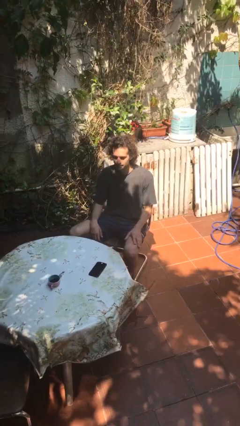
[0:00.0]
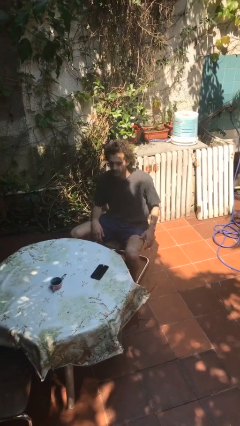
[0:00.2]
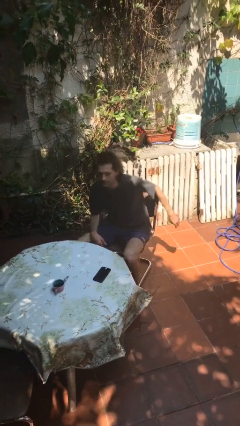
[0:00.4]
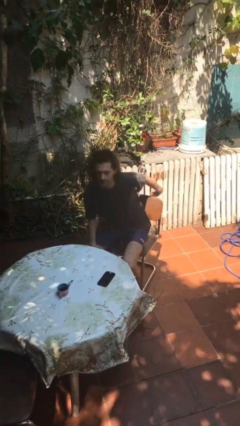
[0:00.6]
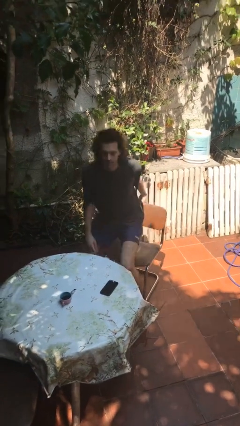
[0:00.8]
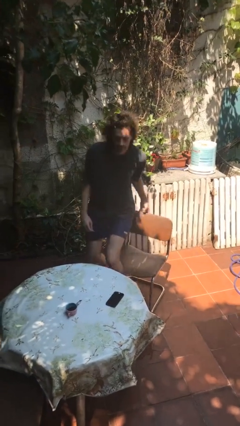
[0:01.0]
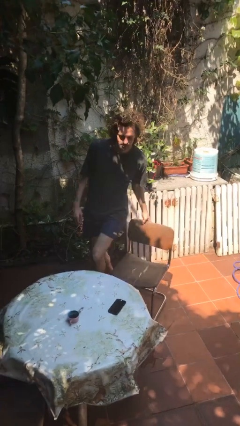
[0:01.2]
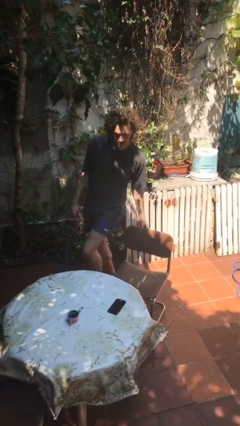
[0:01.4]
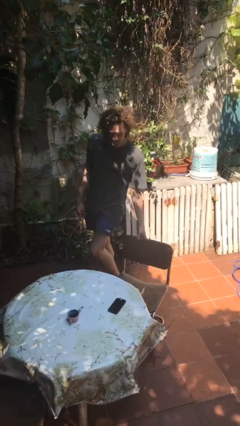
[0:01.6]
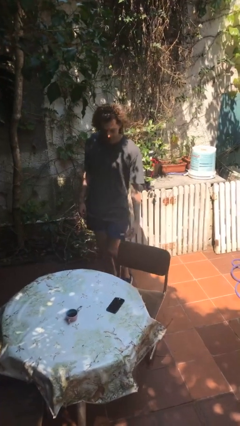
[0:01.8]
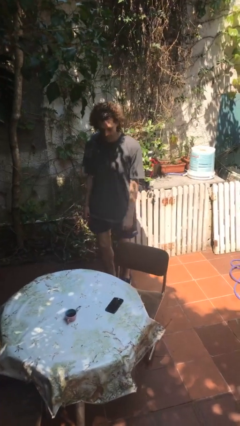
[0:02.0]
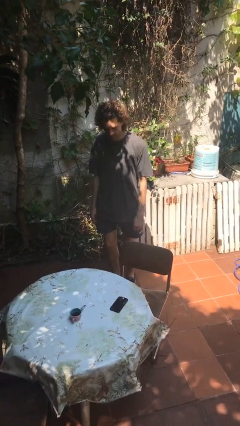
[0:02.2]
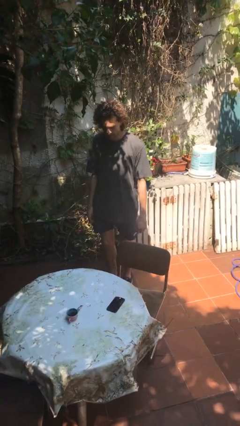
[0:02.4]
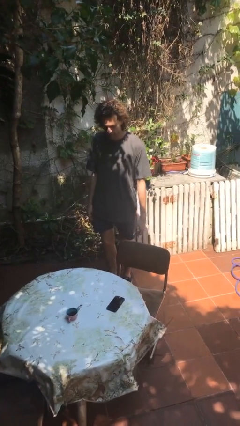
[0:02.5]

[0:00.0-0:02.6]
person stands up

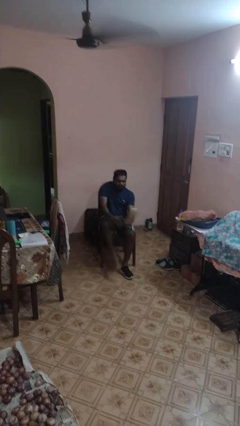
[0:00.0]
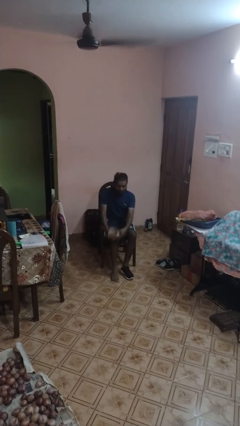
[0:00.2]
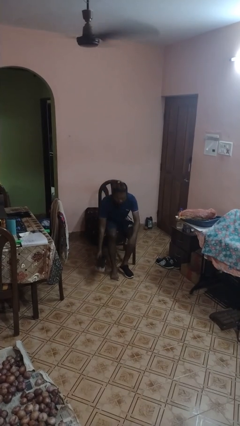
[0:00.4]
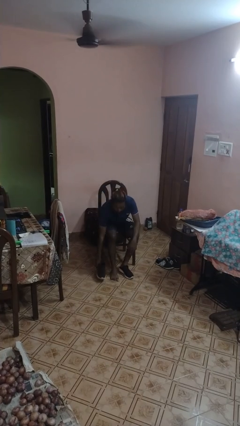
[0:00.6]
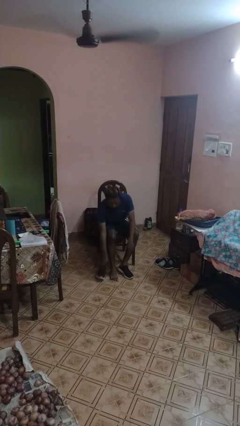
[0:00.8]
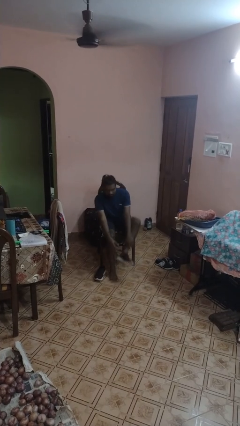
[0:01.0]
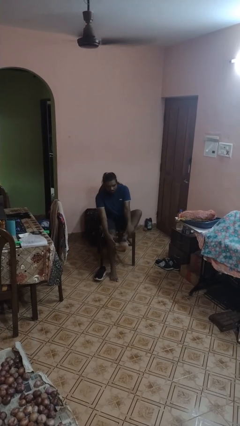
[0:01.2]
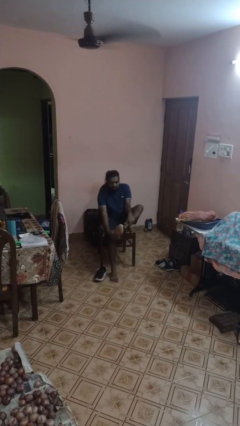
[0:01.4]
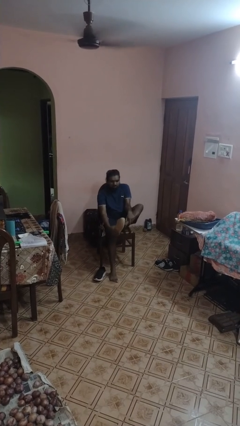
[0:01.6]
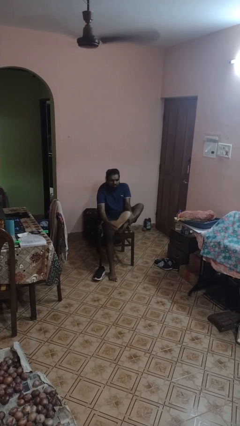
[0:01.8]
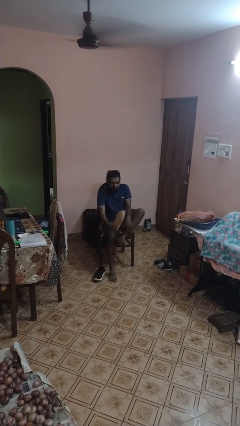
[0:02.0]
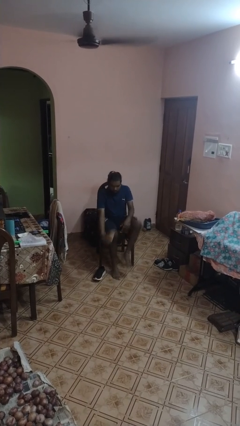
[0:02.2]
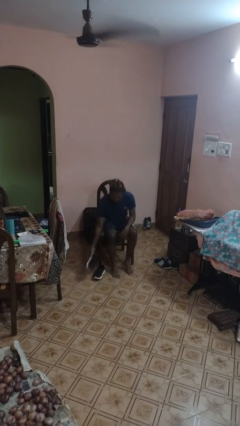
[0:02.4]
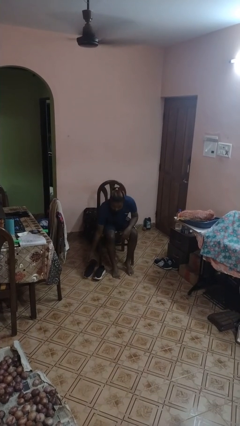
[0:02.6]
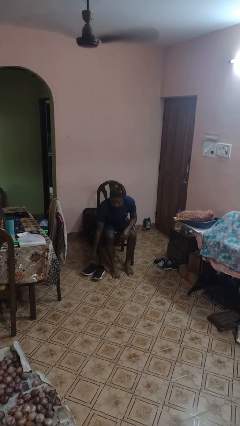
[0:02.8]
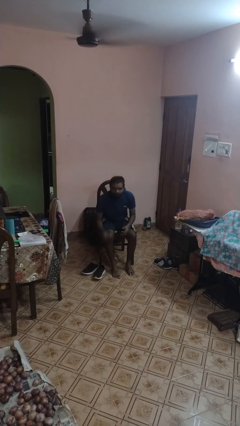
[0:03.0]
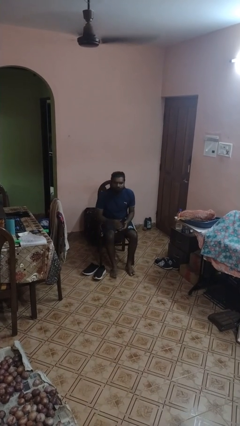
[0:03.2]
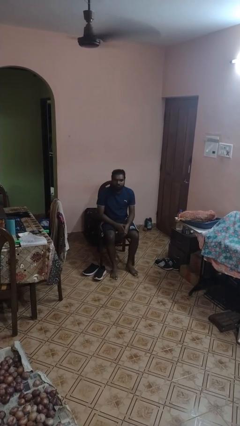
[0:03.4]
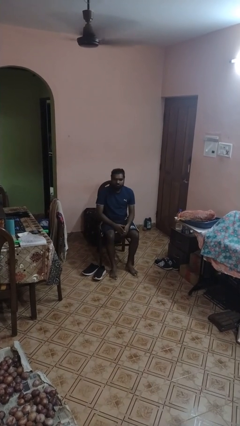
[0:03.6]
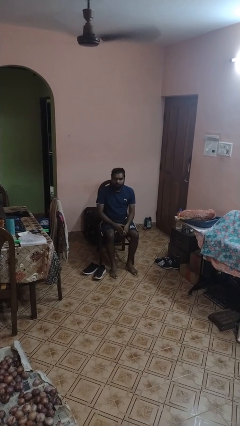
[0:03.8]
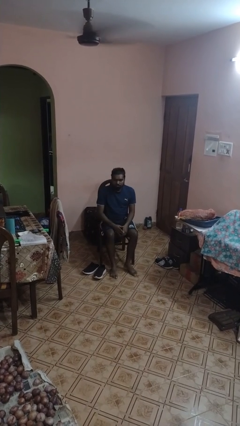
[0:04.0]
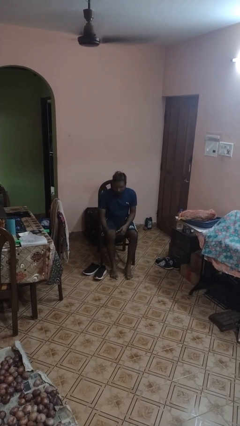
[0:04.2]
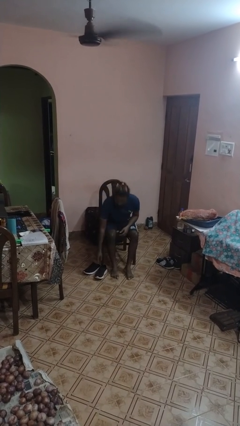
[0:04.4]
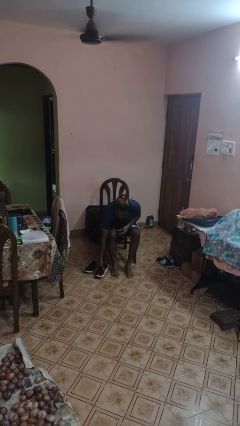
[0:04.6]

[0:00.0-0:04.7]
person takes off shoes

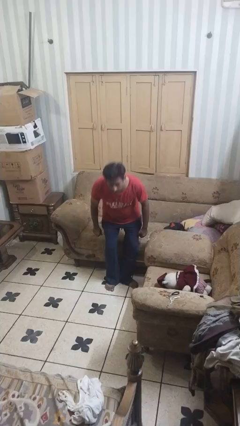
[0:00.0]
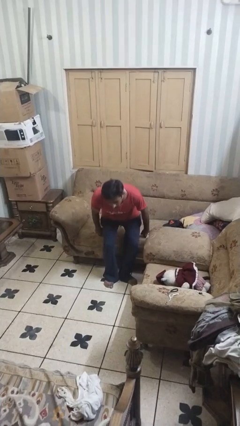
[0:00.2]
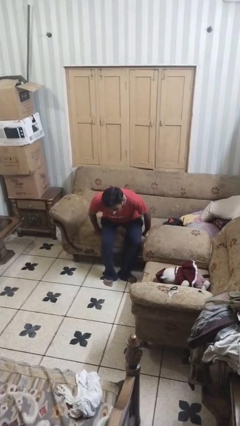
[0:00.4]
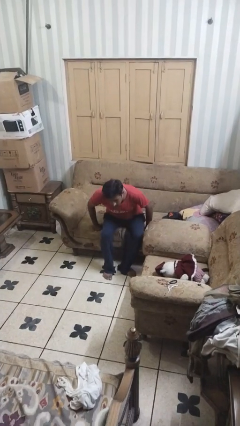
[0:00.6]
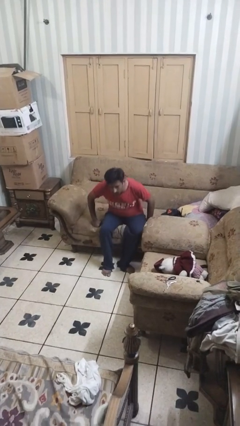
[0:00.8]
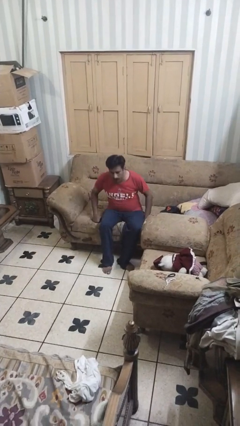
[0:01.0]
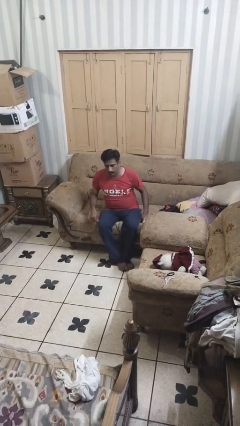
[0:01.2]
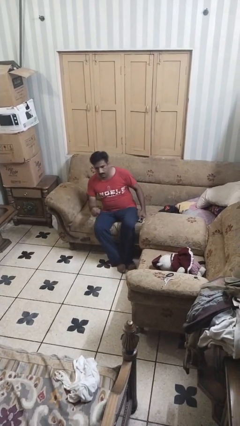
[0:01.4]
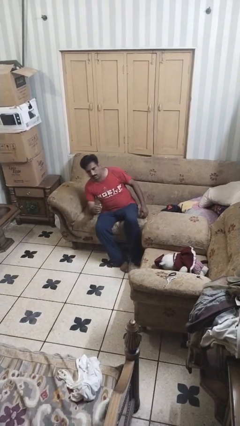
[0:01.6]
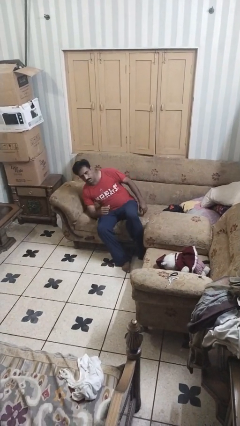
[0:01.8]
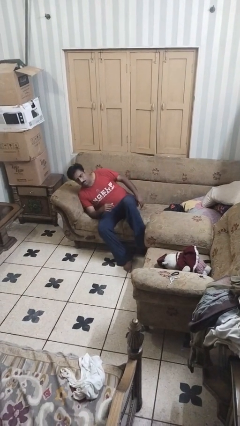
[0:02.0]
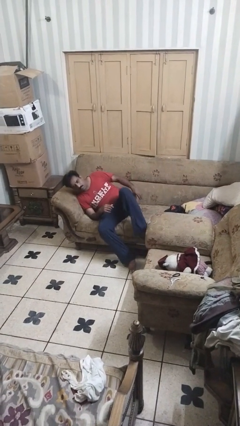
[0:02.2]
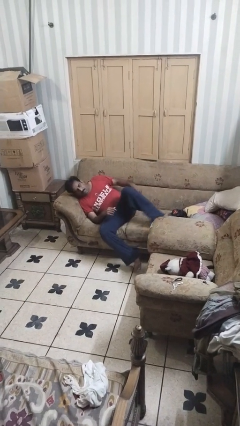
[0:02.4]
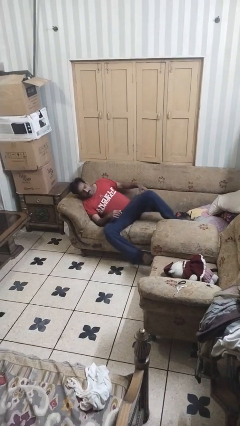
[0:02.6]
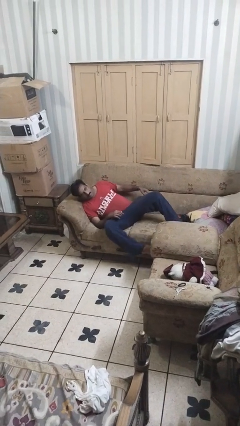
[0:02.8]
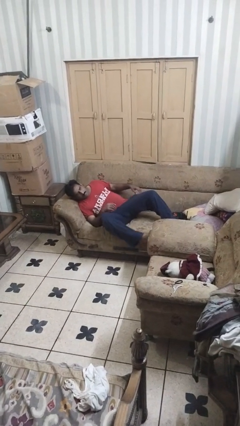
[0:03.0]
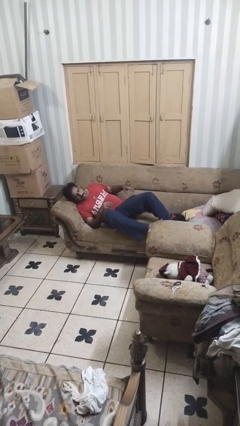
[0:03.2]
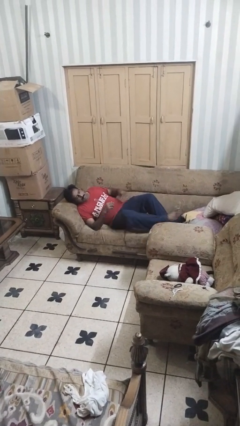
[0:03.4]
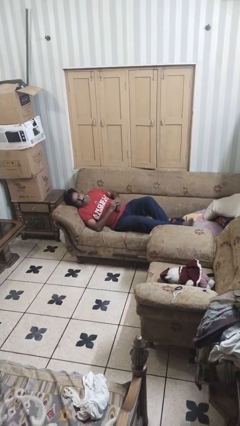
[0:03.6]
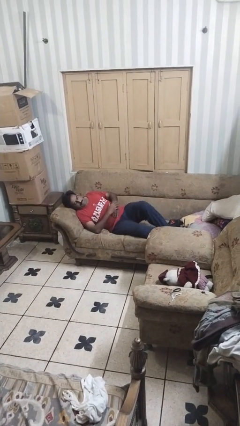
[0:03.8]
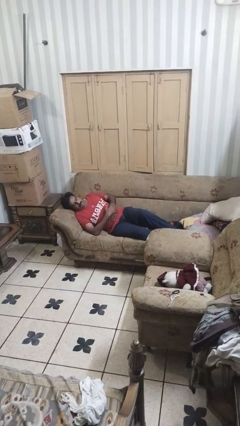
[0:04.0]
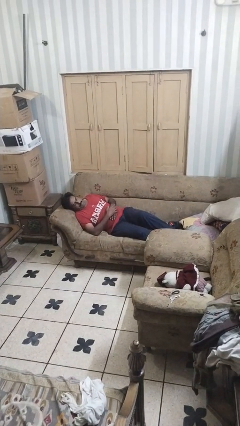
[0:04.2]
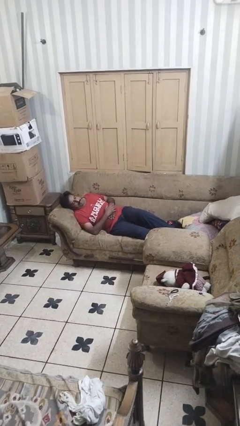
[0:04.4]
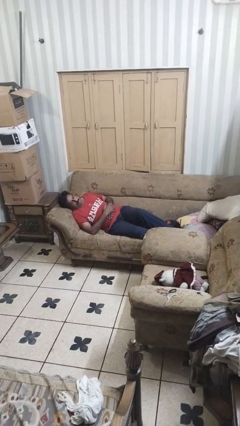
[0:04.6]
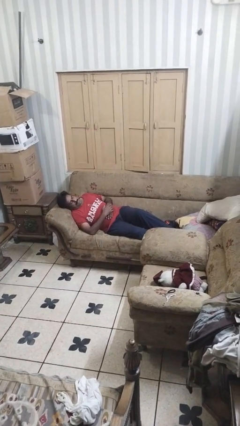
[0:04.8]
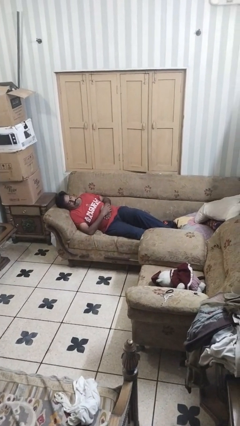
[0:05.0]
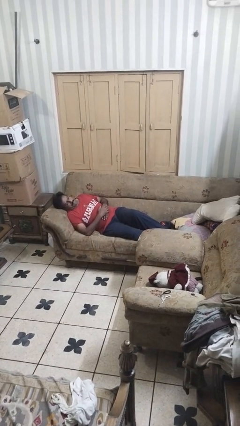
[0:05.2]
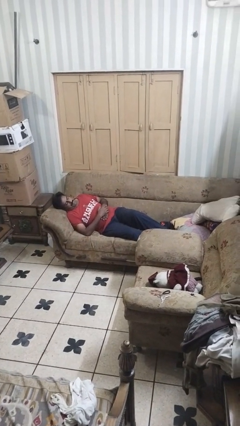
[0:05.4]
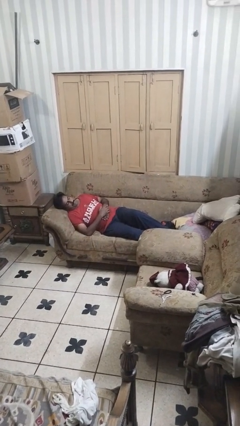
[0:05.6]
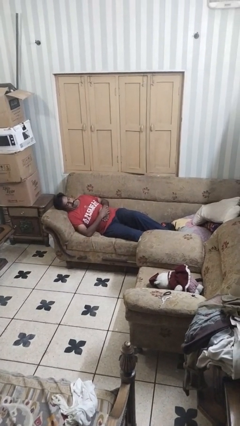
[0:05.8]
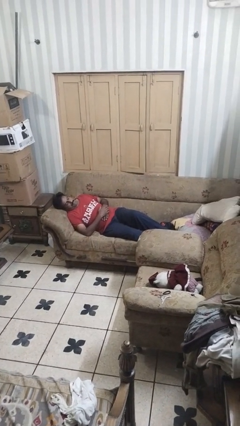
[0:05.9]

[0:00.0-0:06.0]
person lies down on couch

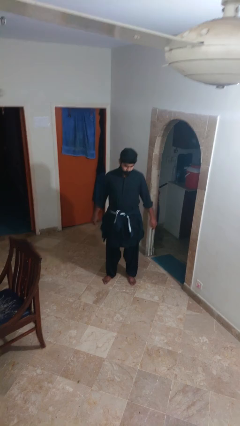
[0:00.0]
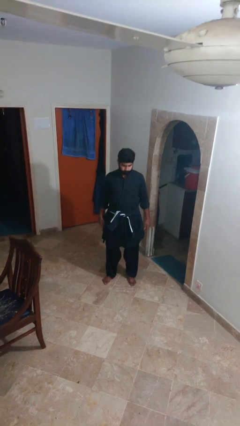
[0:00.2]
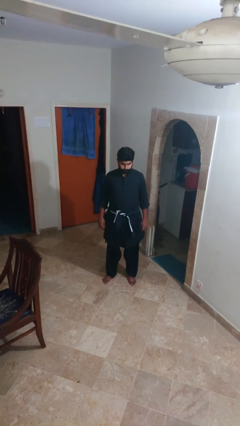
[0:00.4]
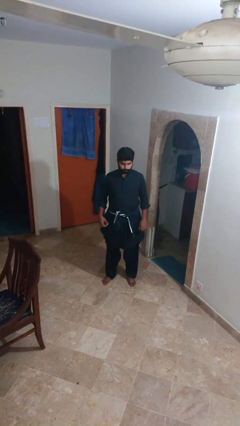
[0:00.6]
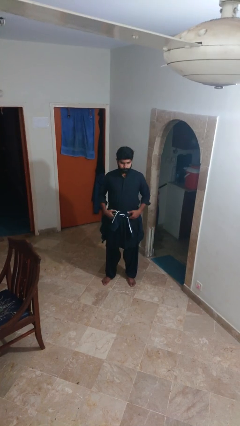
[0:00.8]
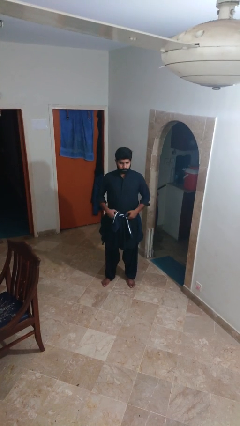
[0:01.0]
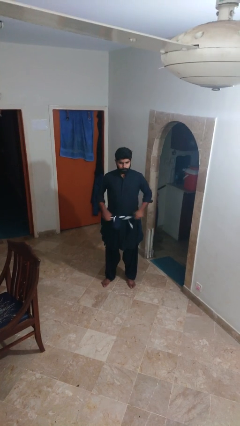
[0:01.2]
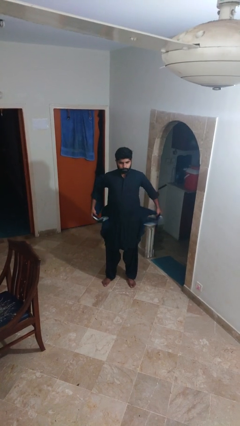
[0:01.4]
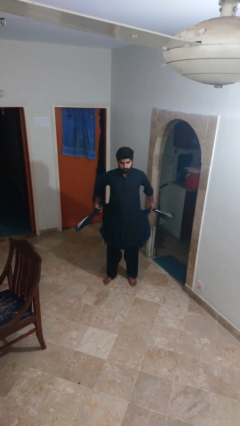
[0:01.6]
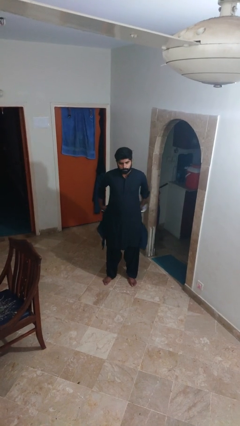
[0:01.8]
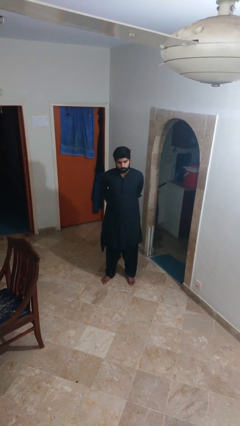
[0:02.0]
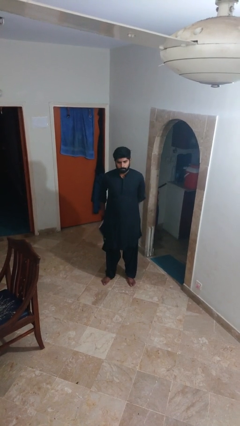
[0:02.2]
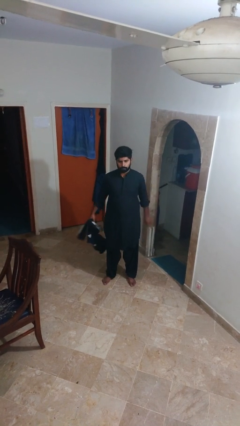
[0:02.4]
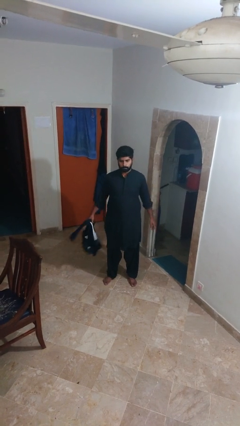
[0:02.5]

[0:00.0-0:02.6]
person unties jacket around waist

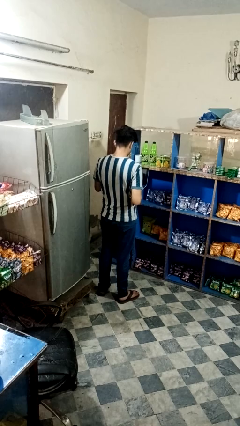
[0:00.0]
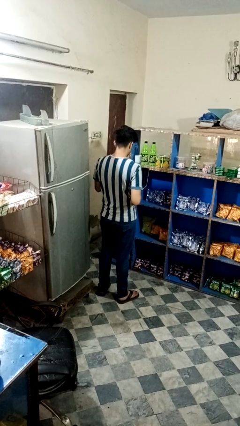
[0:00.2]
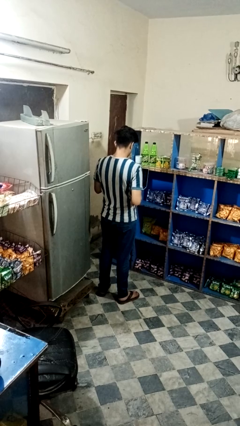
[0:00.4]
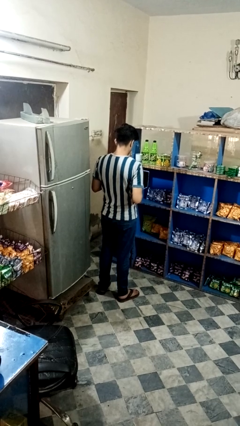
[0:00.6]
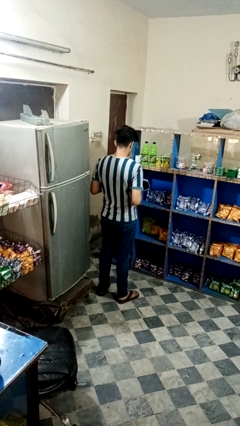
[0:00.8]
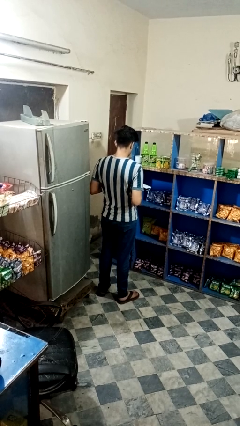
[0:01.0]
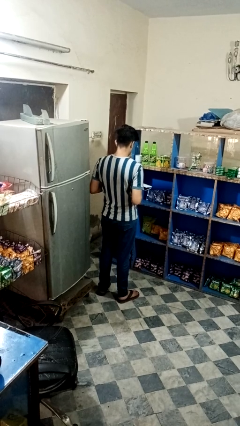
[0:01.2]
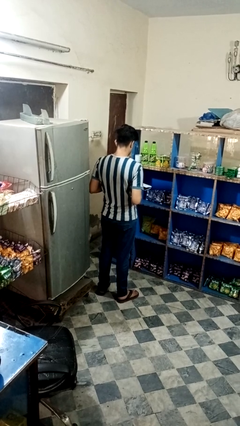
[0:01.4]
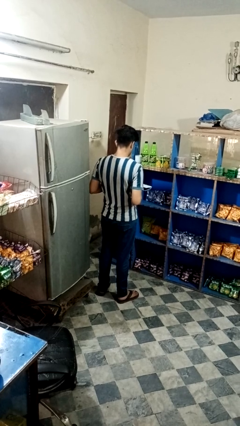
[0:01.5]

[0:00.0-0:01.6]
person closes laptop

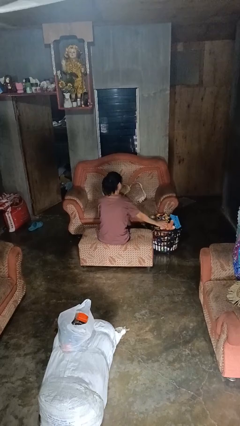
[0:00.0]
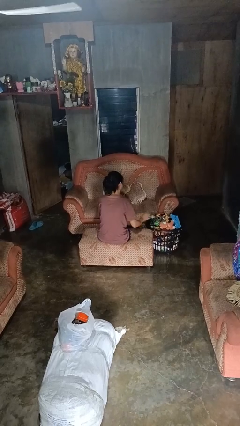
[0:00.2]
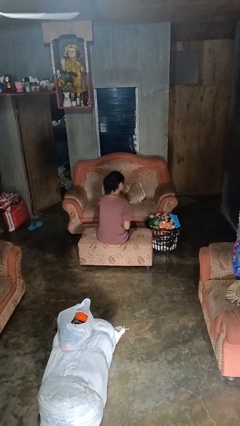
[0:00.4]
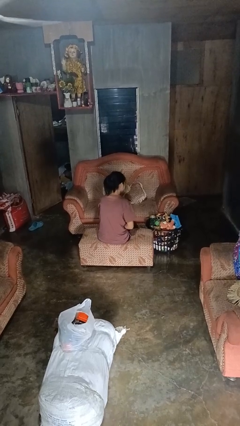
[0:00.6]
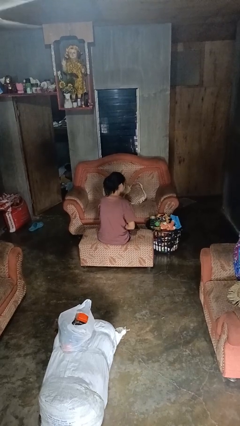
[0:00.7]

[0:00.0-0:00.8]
person puts object into basket
